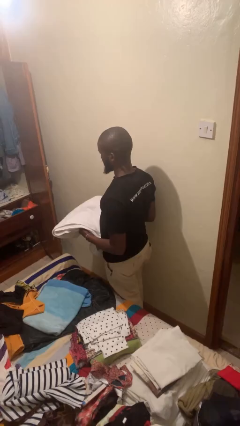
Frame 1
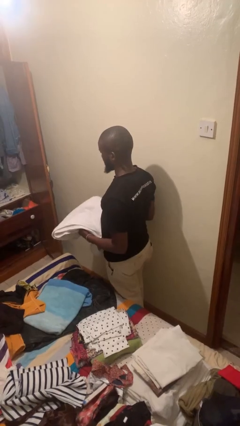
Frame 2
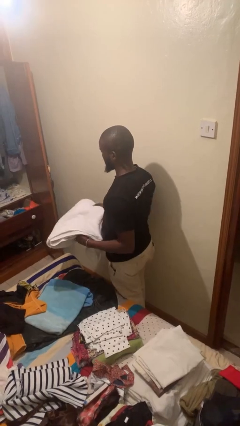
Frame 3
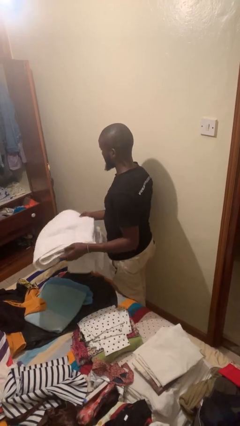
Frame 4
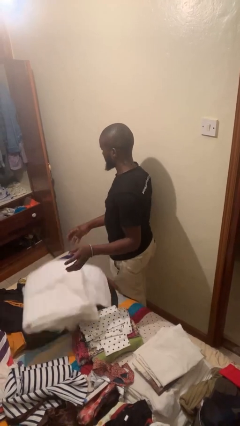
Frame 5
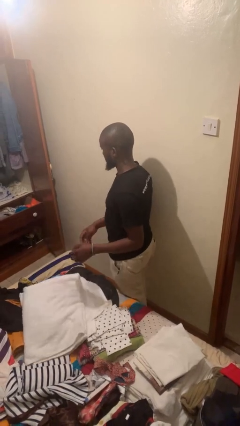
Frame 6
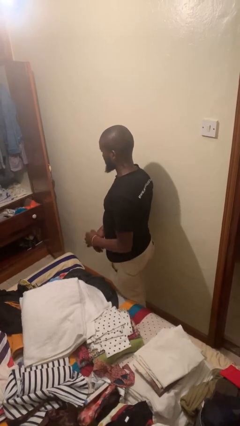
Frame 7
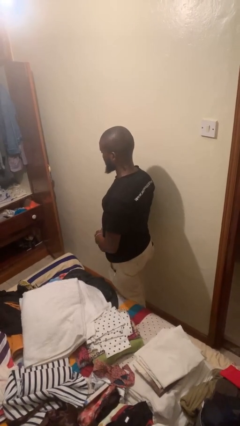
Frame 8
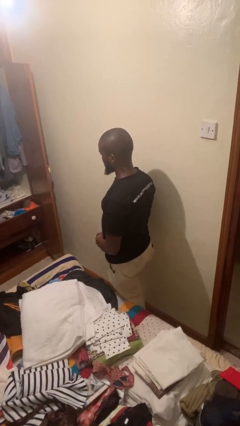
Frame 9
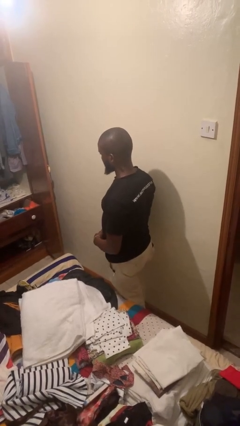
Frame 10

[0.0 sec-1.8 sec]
person throws object on bed

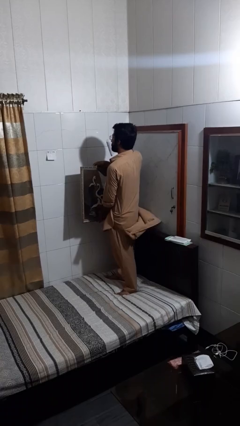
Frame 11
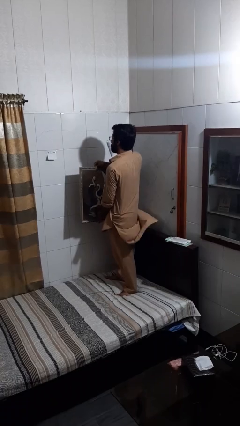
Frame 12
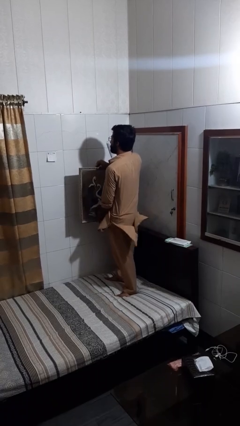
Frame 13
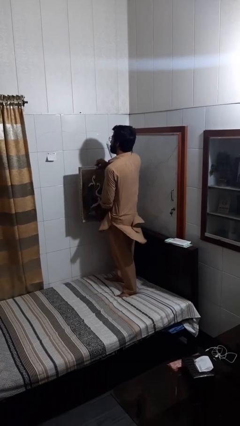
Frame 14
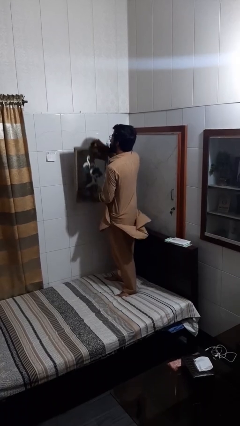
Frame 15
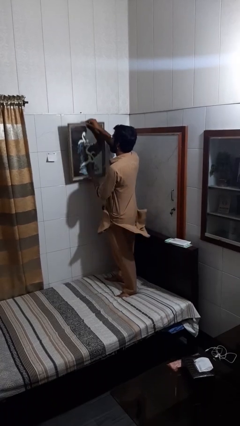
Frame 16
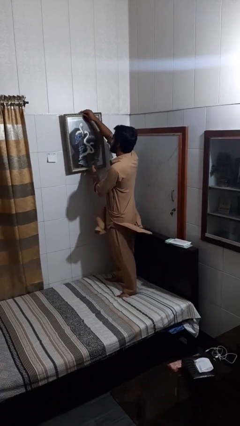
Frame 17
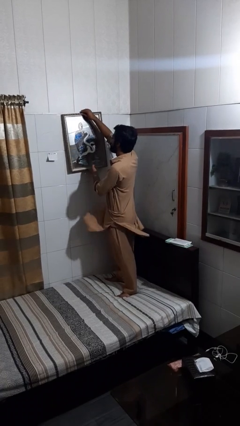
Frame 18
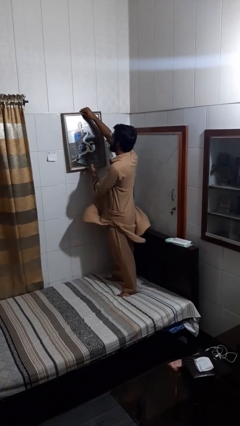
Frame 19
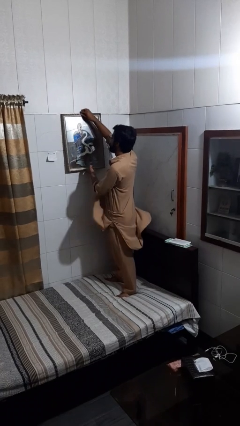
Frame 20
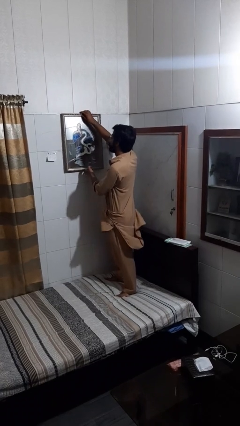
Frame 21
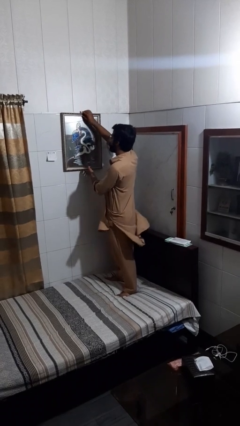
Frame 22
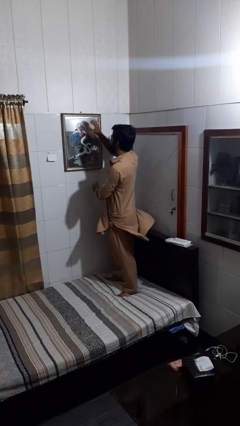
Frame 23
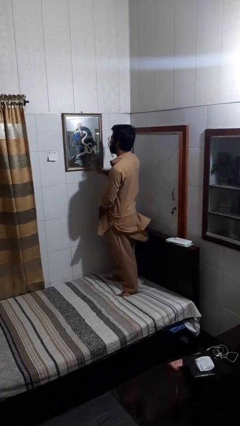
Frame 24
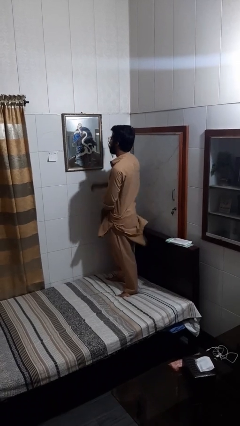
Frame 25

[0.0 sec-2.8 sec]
person puts up picture frame

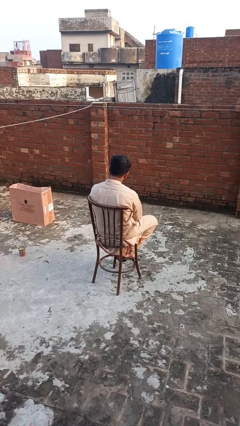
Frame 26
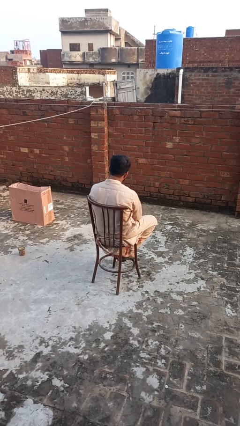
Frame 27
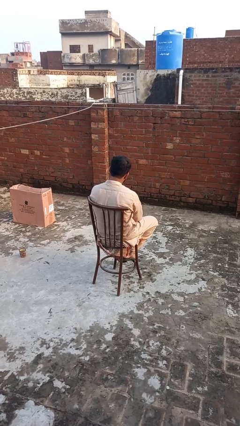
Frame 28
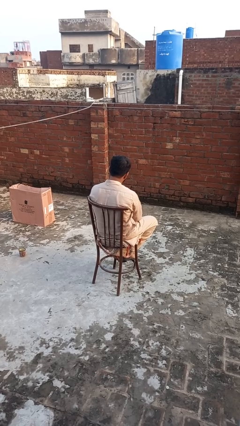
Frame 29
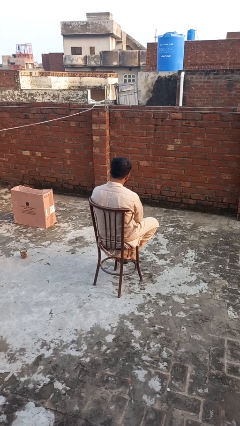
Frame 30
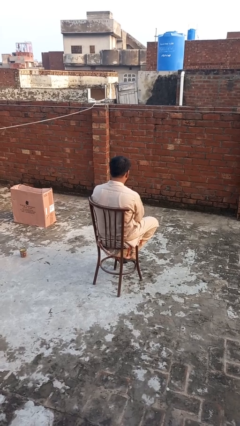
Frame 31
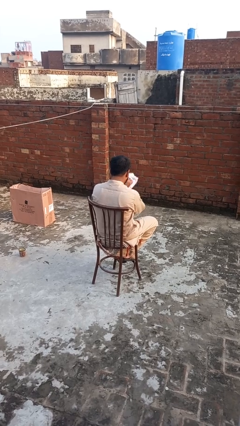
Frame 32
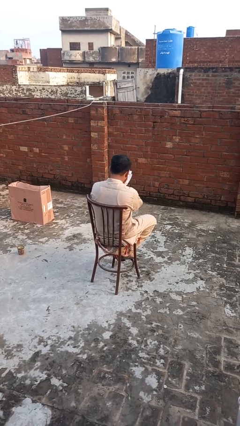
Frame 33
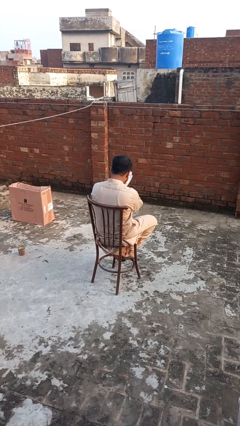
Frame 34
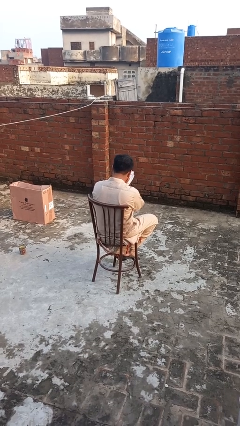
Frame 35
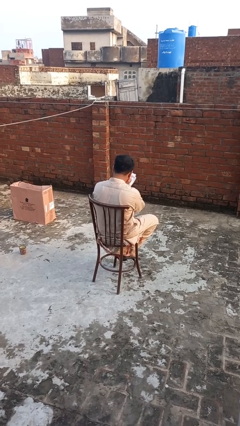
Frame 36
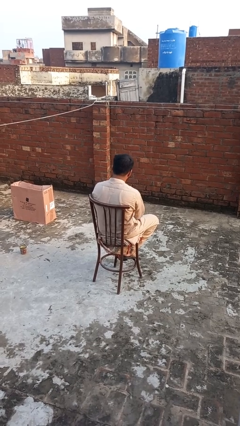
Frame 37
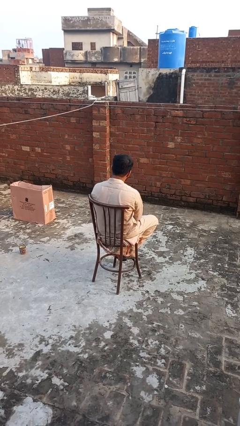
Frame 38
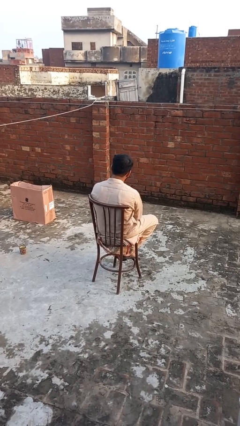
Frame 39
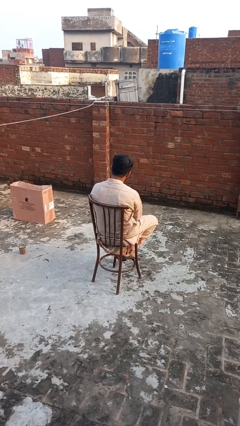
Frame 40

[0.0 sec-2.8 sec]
person blows nose

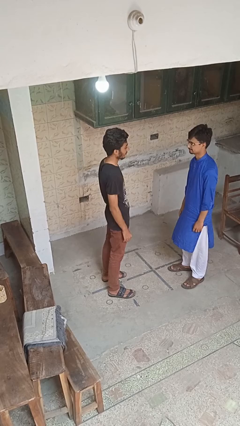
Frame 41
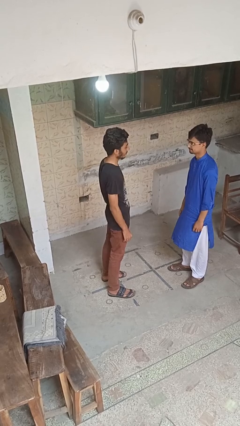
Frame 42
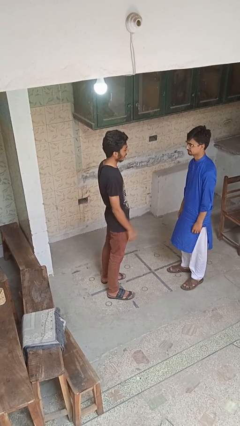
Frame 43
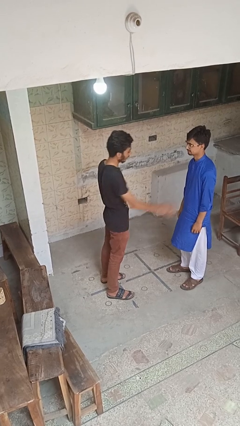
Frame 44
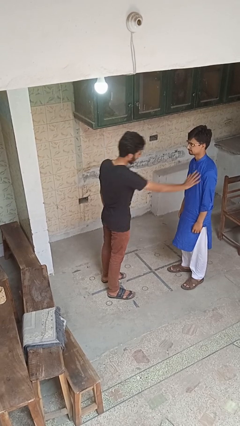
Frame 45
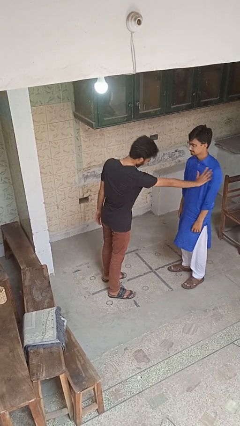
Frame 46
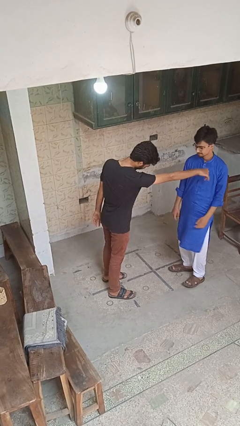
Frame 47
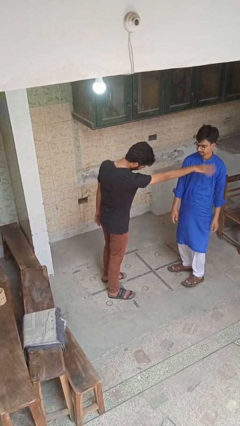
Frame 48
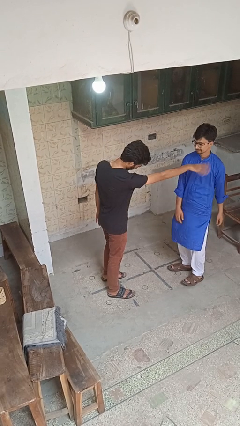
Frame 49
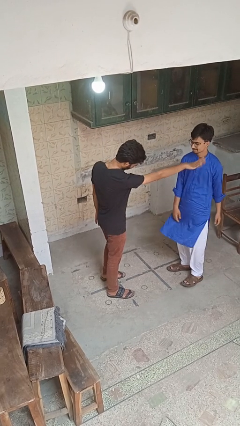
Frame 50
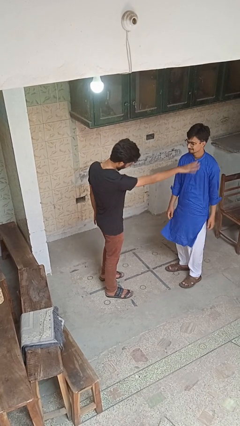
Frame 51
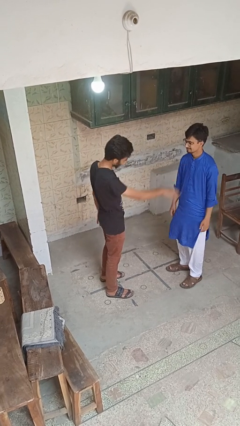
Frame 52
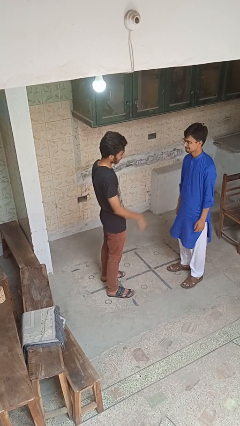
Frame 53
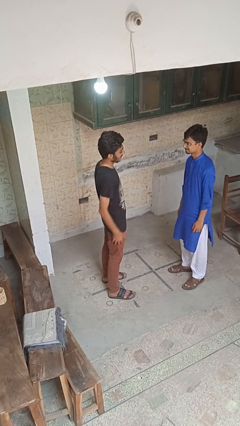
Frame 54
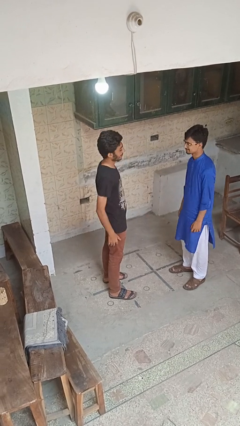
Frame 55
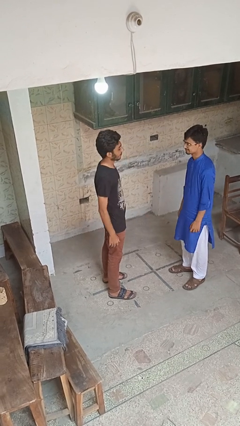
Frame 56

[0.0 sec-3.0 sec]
person shoves person

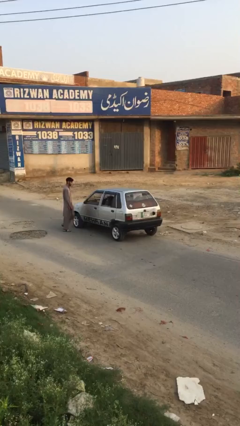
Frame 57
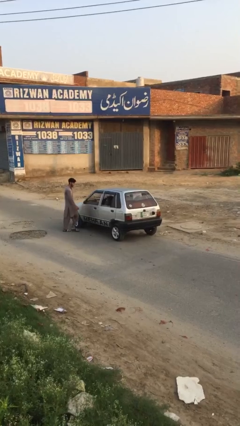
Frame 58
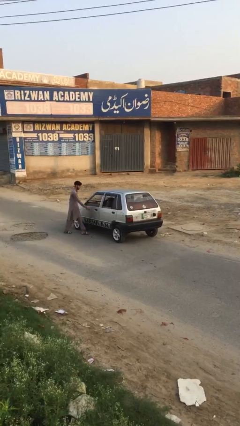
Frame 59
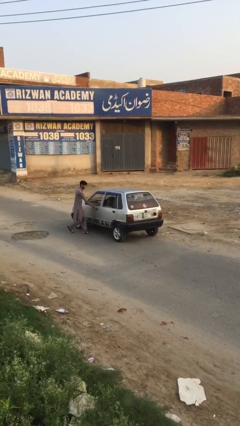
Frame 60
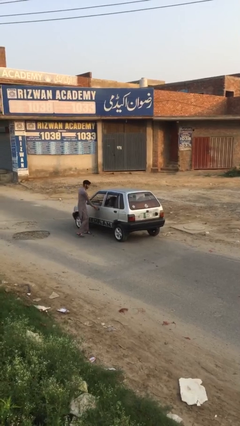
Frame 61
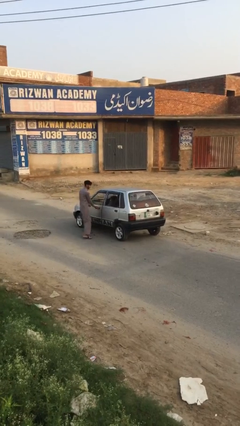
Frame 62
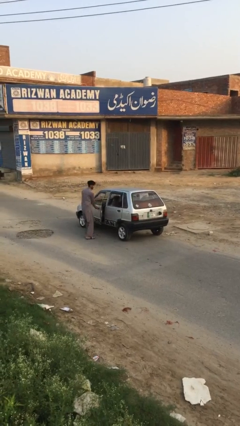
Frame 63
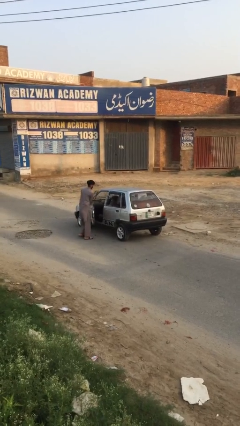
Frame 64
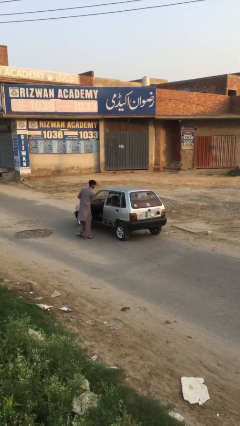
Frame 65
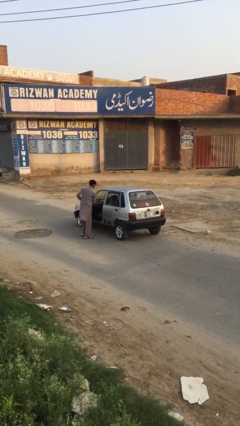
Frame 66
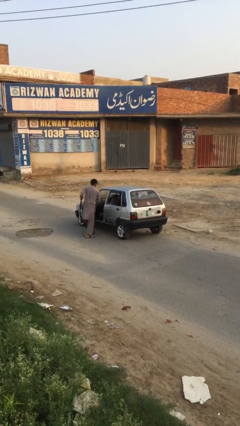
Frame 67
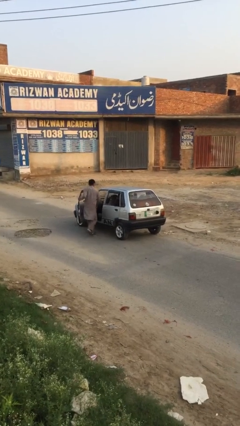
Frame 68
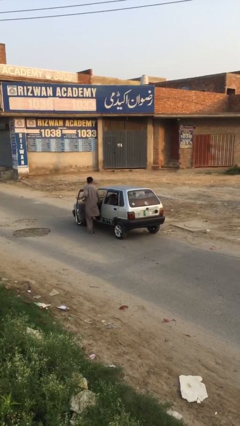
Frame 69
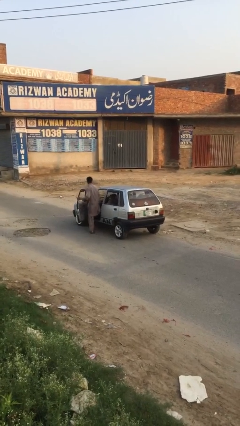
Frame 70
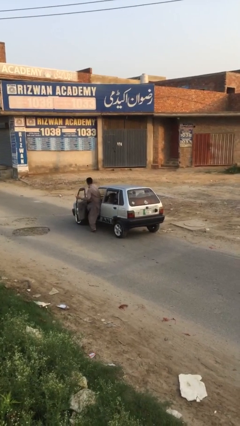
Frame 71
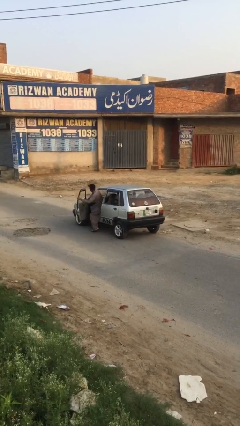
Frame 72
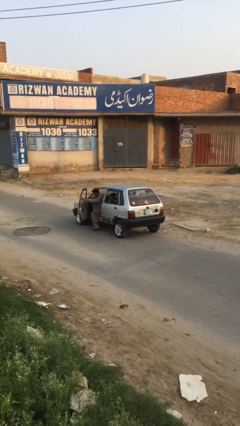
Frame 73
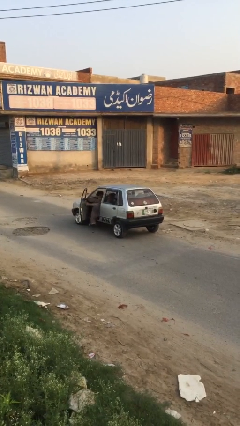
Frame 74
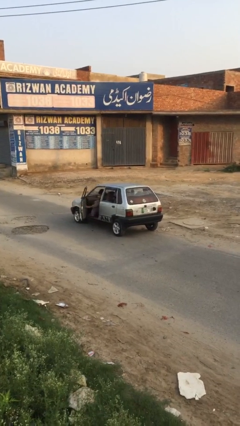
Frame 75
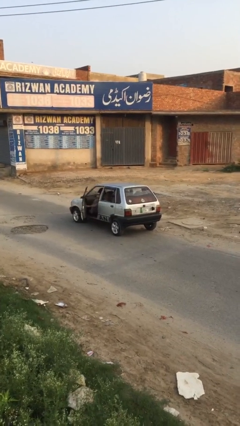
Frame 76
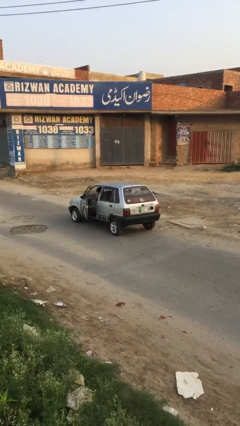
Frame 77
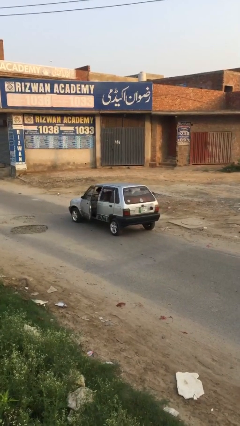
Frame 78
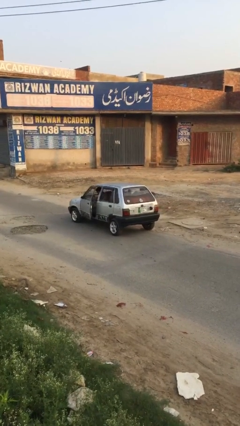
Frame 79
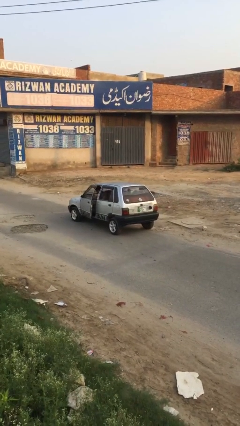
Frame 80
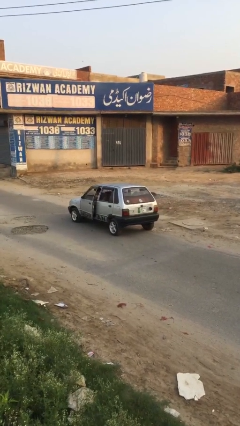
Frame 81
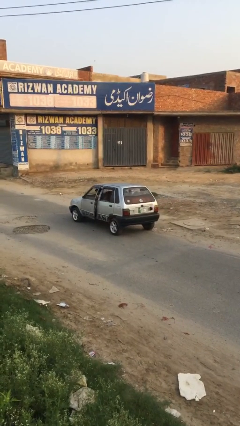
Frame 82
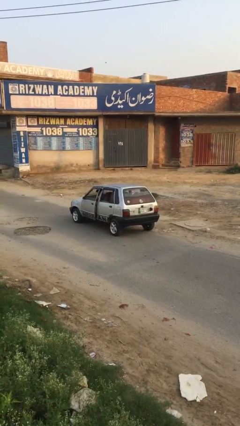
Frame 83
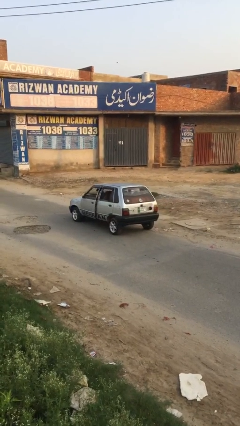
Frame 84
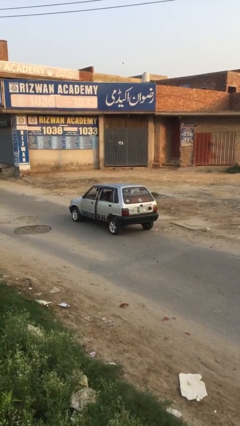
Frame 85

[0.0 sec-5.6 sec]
car picks up person

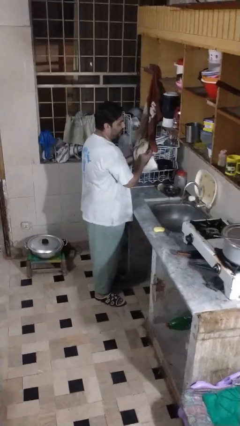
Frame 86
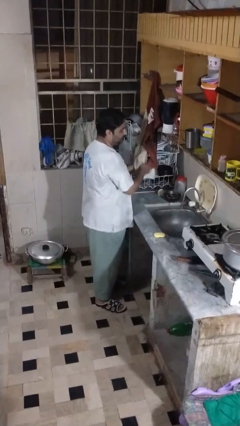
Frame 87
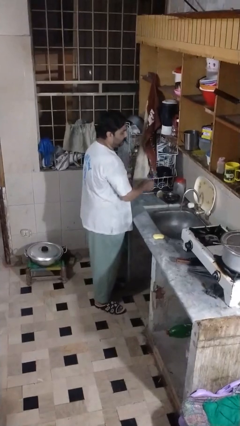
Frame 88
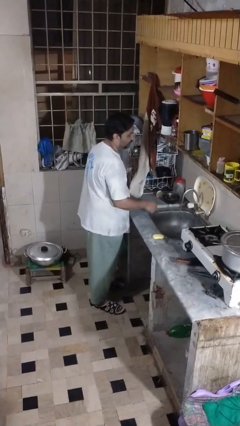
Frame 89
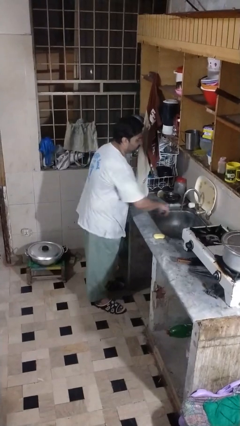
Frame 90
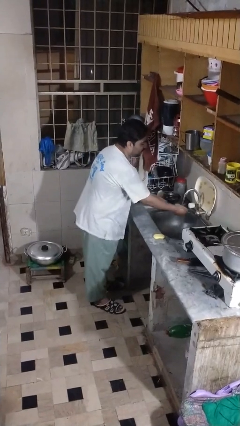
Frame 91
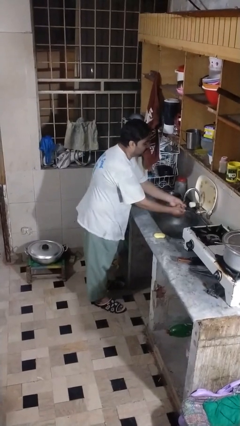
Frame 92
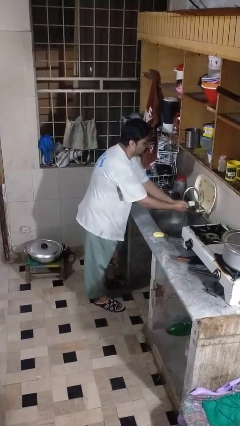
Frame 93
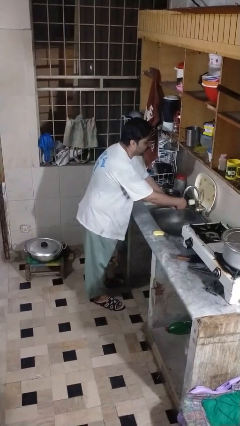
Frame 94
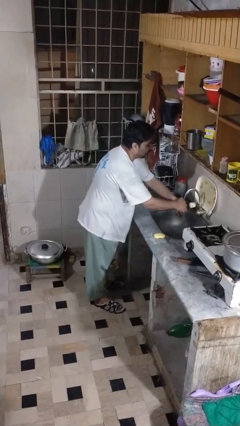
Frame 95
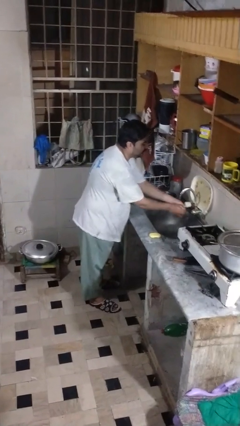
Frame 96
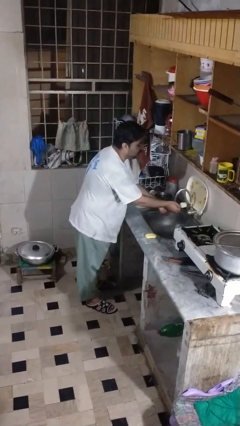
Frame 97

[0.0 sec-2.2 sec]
person washes hands
